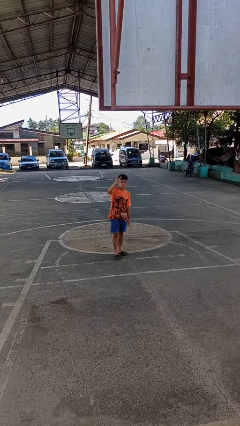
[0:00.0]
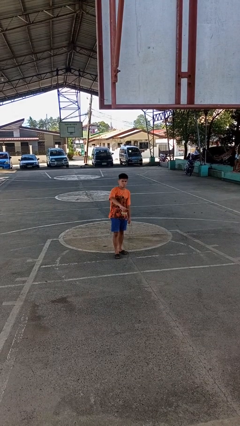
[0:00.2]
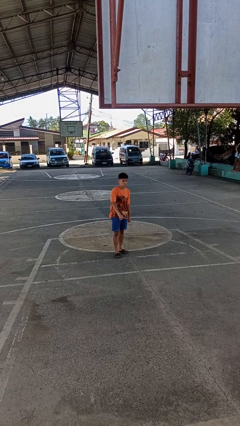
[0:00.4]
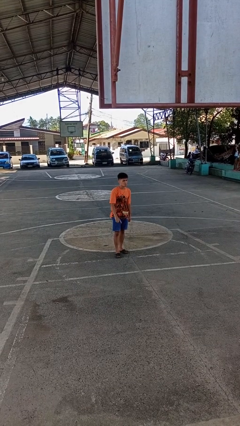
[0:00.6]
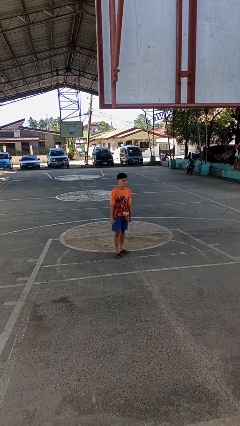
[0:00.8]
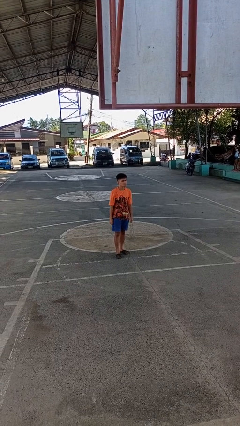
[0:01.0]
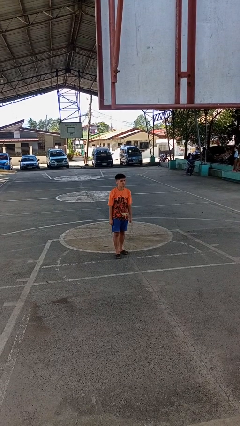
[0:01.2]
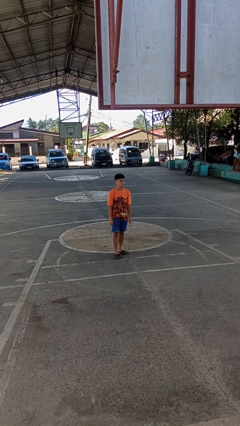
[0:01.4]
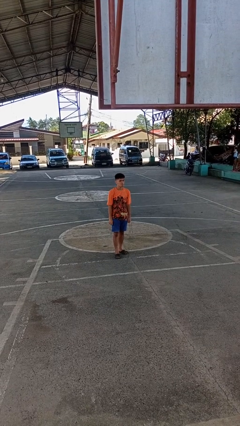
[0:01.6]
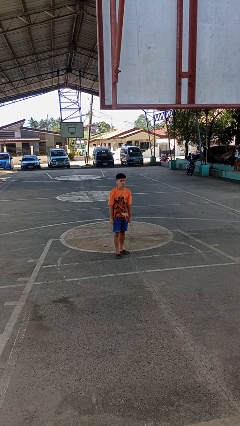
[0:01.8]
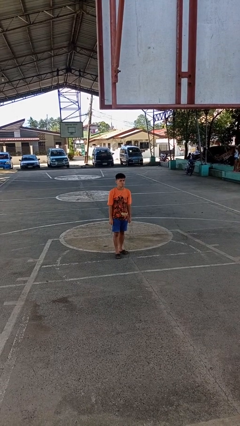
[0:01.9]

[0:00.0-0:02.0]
person gestures swipe down

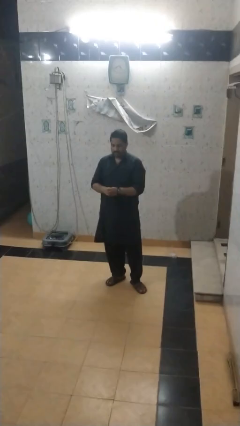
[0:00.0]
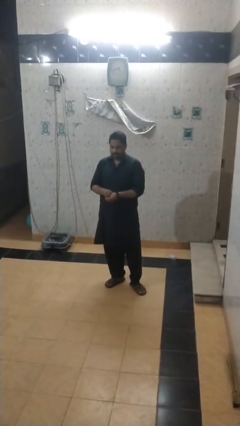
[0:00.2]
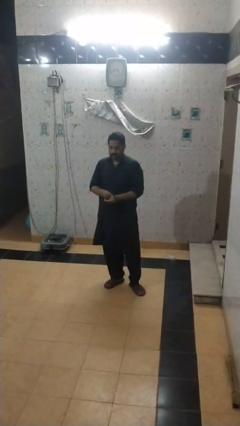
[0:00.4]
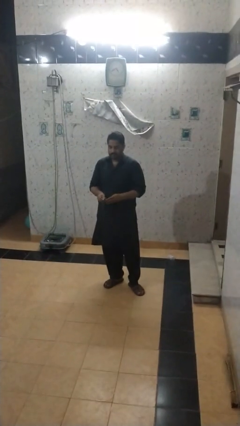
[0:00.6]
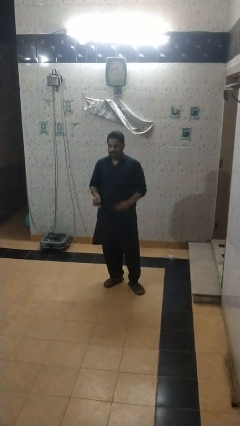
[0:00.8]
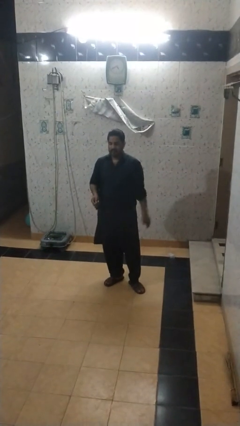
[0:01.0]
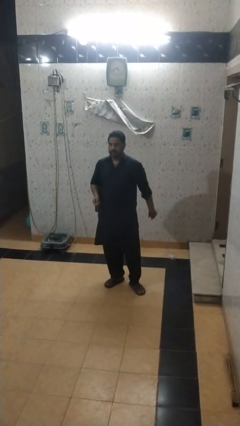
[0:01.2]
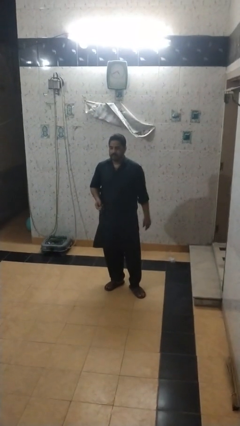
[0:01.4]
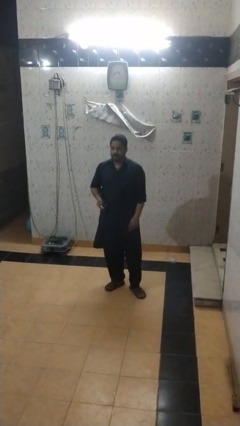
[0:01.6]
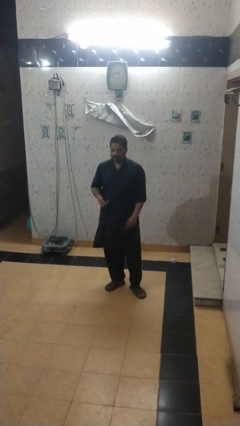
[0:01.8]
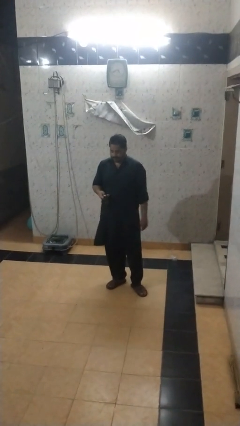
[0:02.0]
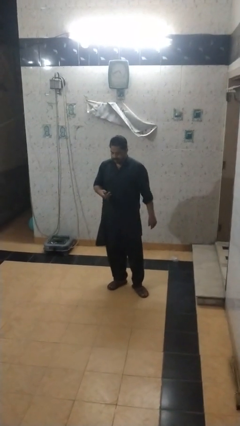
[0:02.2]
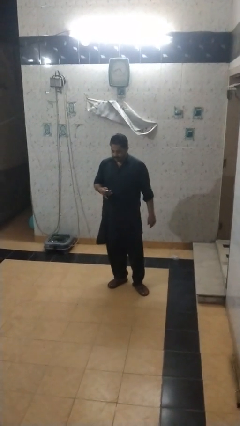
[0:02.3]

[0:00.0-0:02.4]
person takes off wristwatch

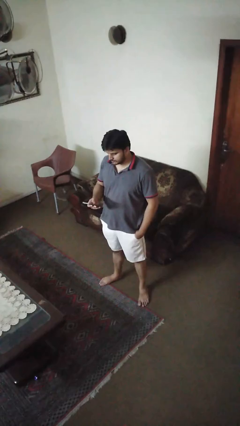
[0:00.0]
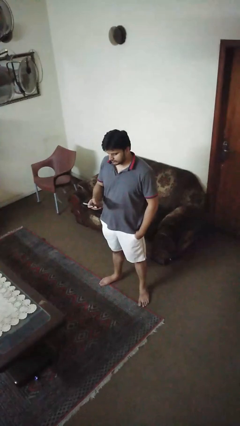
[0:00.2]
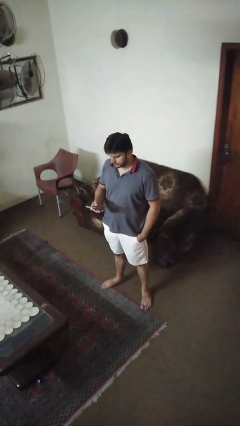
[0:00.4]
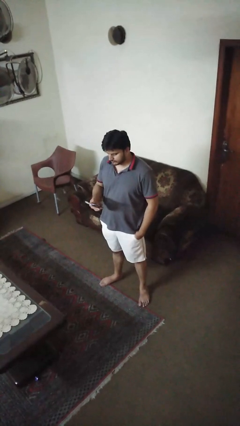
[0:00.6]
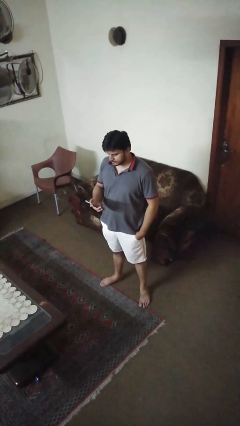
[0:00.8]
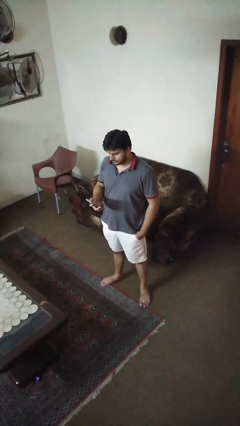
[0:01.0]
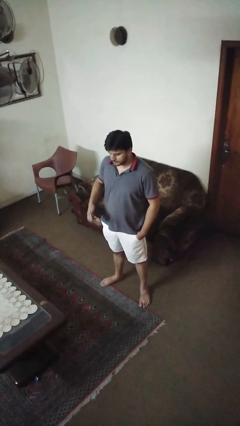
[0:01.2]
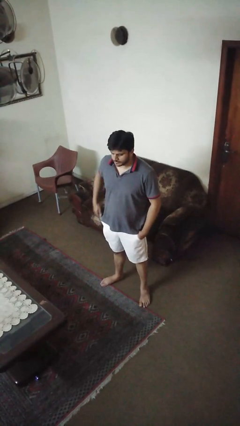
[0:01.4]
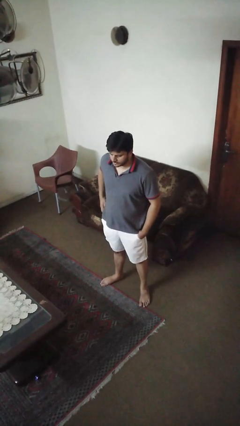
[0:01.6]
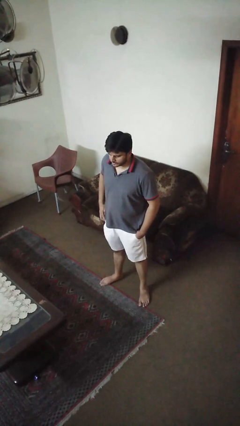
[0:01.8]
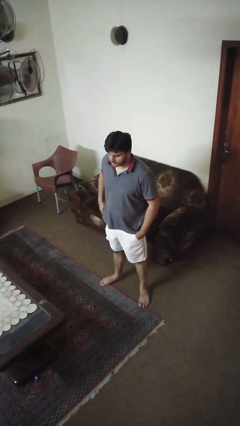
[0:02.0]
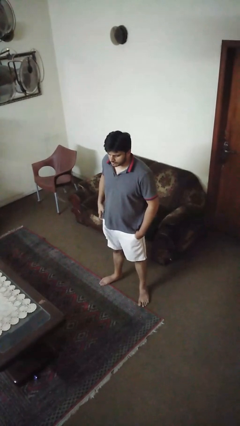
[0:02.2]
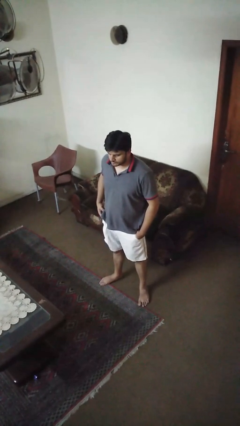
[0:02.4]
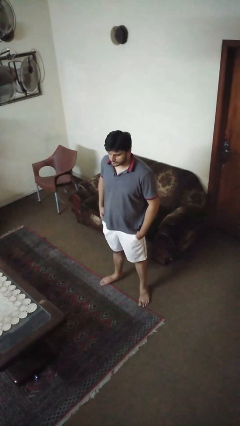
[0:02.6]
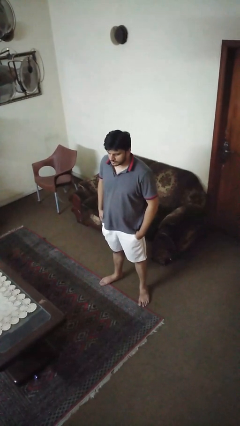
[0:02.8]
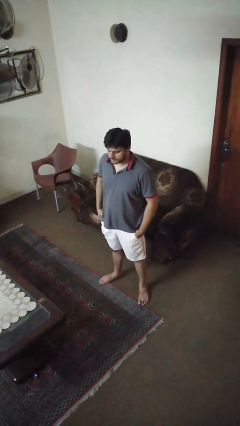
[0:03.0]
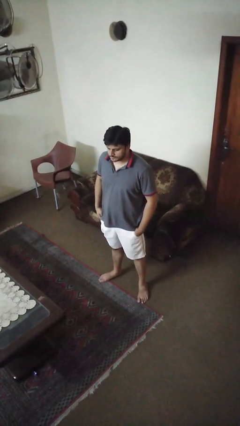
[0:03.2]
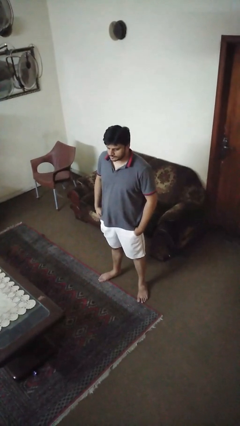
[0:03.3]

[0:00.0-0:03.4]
person puts phone into pocket

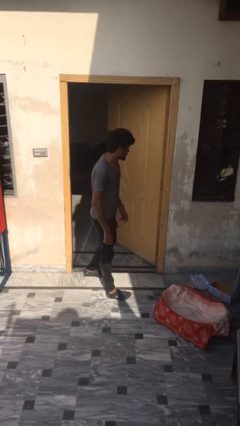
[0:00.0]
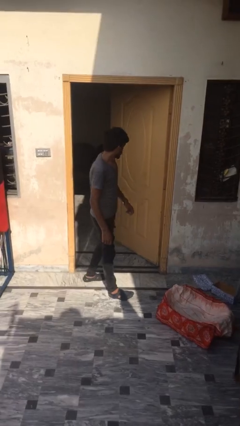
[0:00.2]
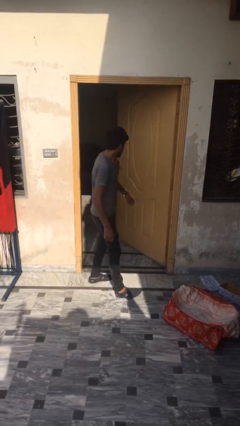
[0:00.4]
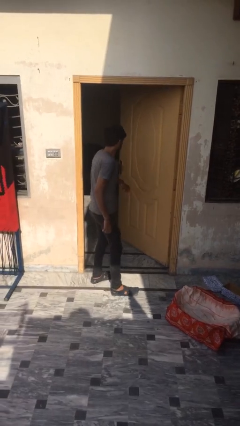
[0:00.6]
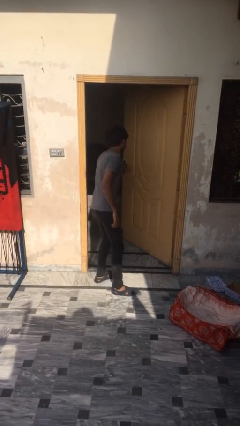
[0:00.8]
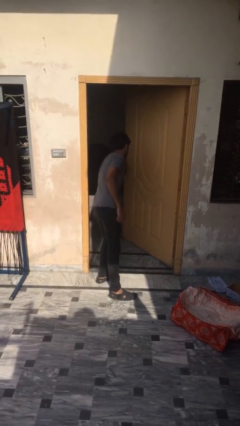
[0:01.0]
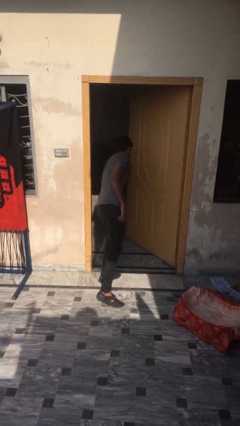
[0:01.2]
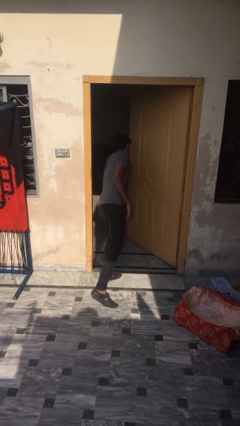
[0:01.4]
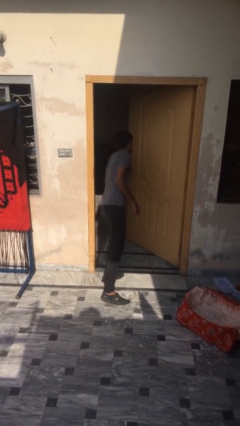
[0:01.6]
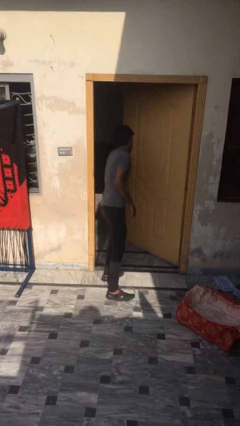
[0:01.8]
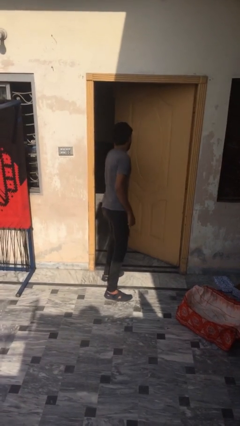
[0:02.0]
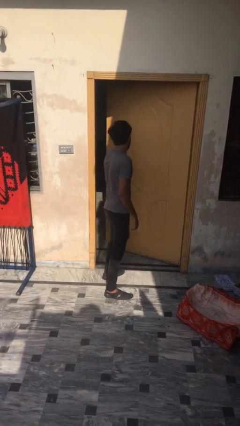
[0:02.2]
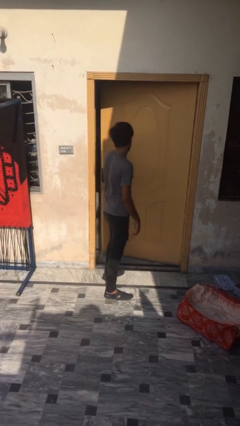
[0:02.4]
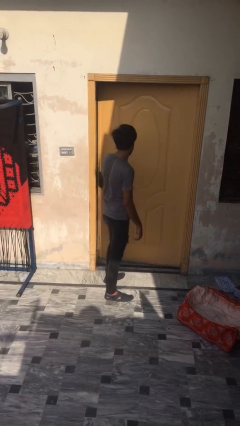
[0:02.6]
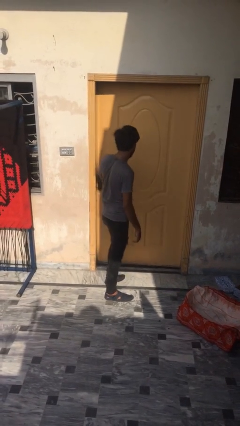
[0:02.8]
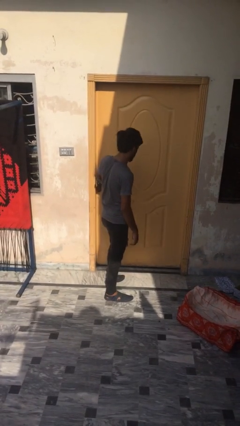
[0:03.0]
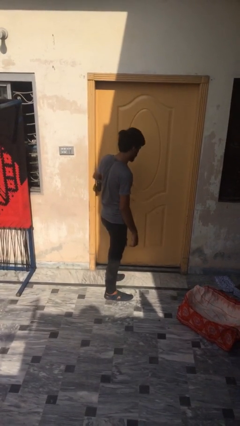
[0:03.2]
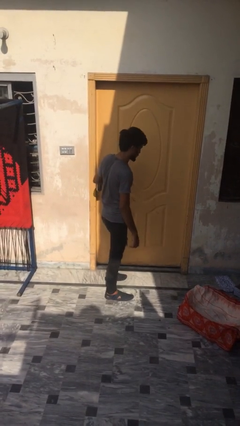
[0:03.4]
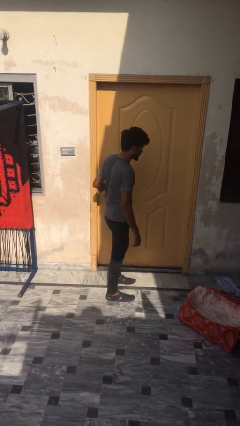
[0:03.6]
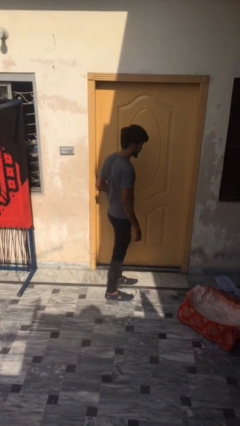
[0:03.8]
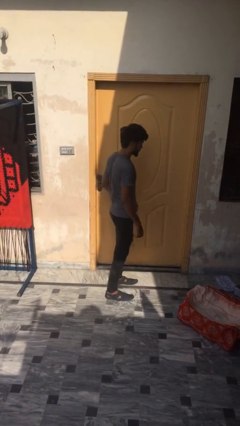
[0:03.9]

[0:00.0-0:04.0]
person closes facility door

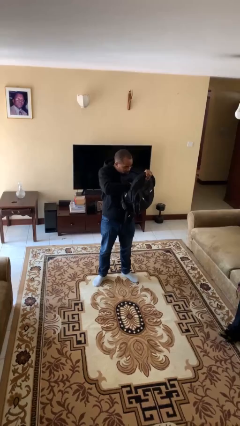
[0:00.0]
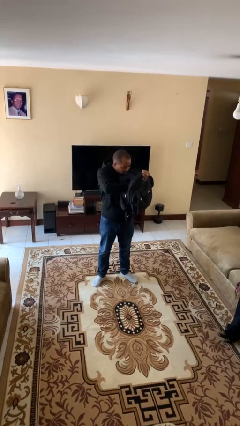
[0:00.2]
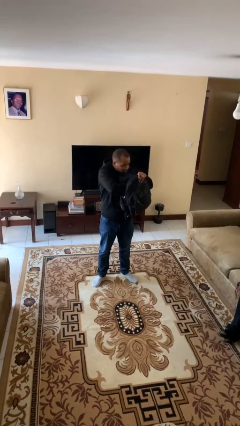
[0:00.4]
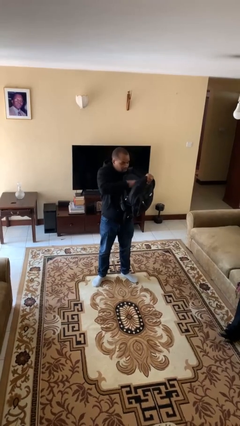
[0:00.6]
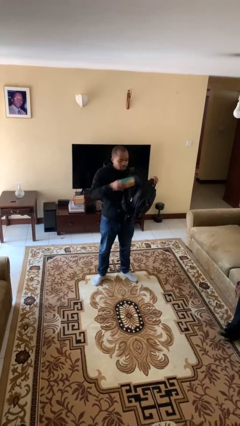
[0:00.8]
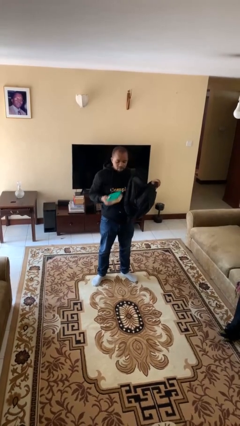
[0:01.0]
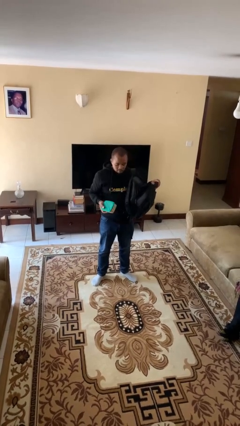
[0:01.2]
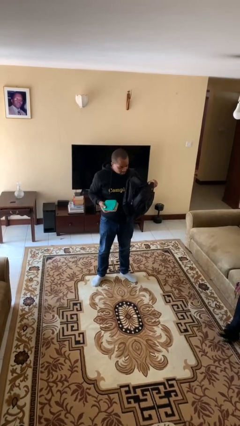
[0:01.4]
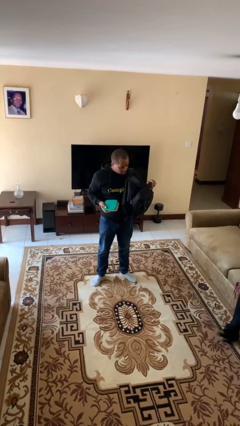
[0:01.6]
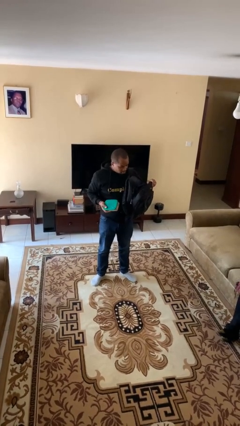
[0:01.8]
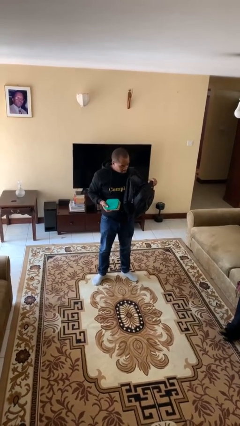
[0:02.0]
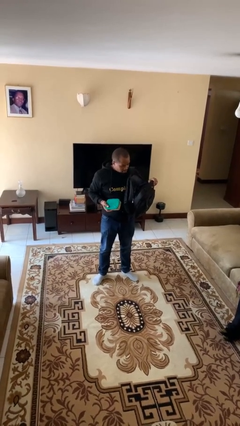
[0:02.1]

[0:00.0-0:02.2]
person takes object from backpack

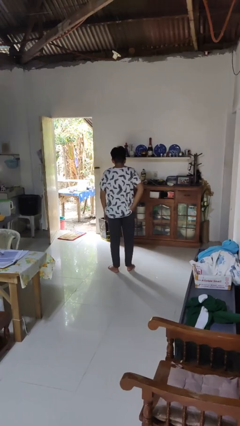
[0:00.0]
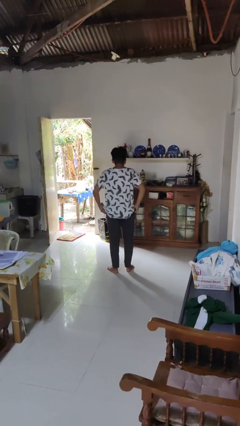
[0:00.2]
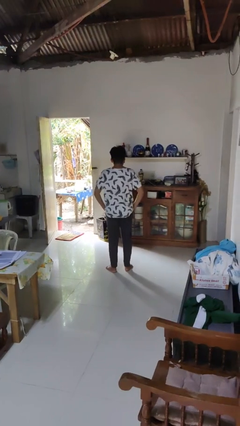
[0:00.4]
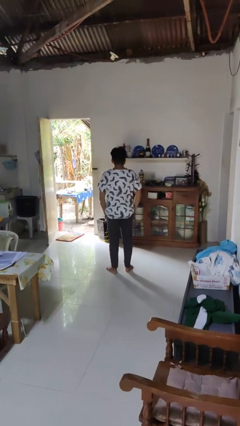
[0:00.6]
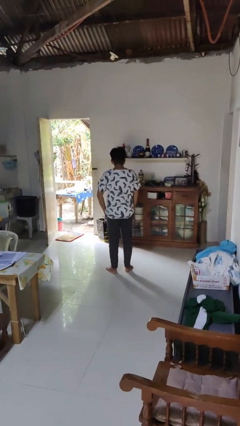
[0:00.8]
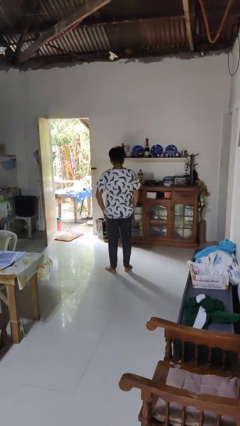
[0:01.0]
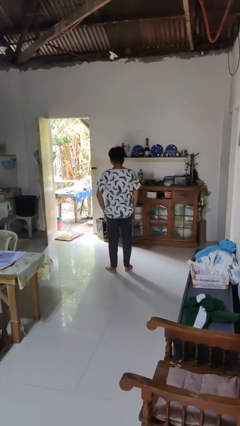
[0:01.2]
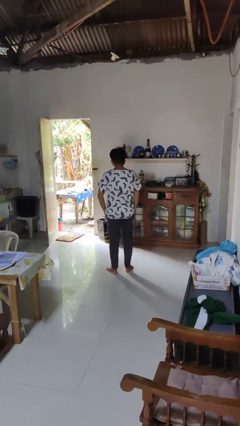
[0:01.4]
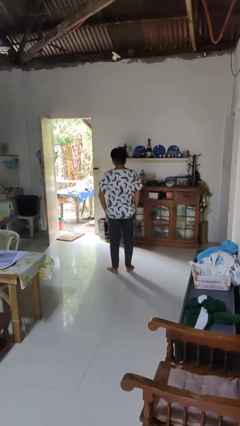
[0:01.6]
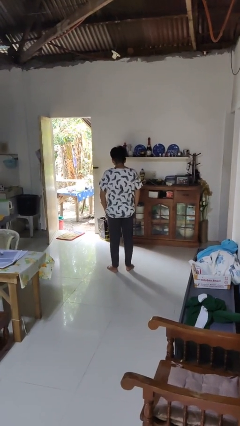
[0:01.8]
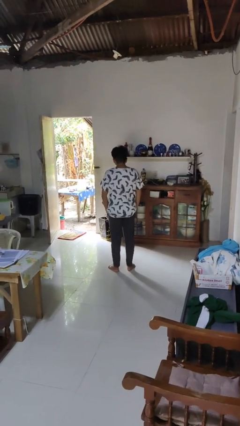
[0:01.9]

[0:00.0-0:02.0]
person puts hands in back pockets

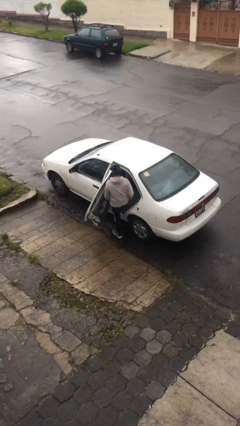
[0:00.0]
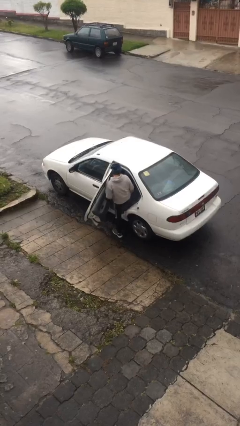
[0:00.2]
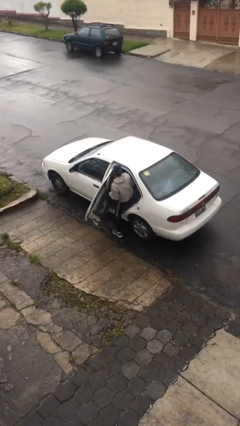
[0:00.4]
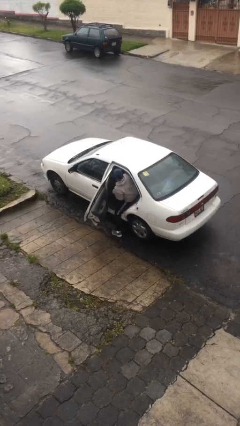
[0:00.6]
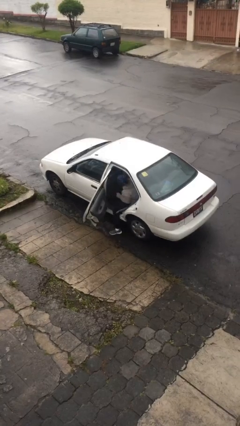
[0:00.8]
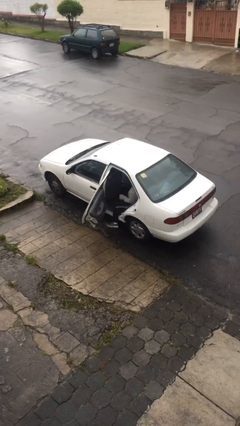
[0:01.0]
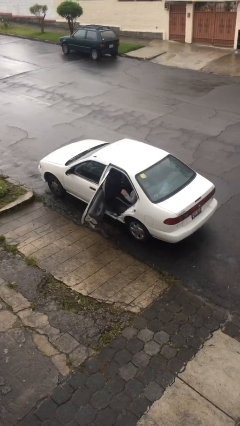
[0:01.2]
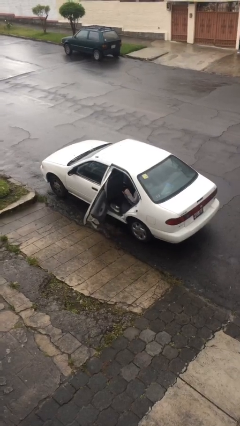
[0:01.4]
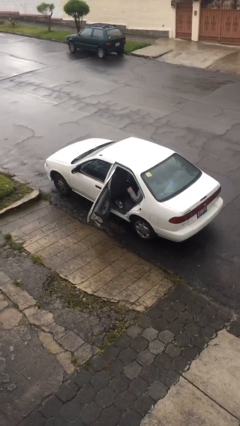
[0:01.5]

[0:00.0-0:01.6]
person enters car
